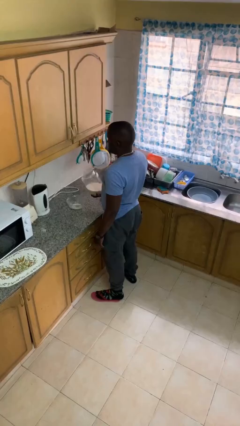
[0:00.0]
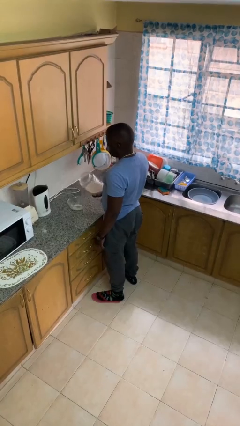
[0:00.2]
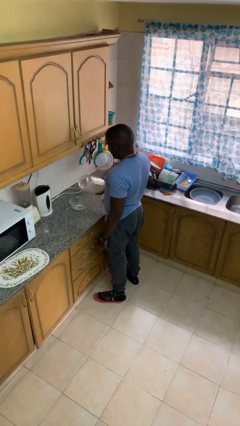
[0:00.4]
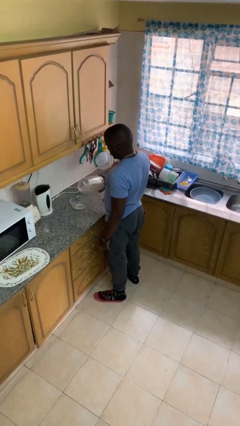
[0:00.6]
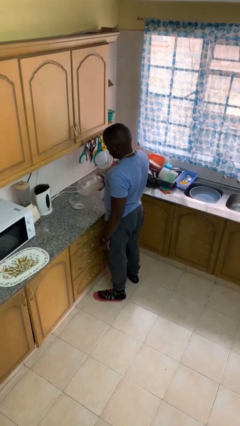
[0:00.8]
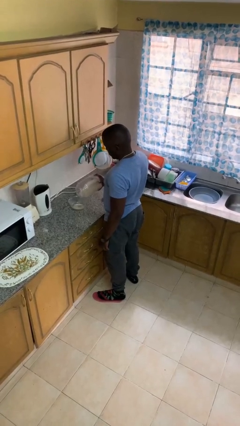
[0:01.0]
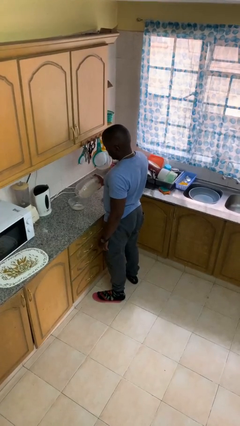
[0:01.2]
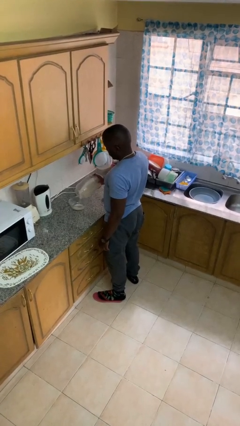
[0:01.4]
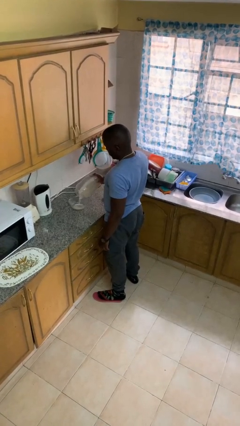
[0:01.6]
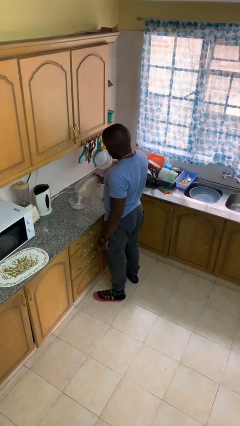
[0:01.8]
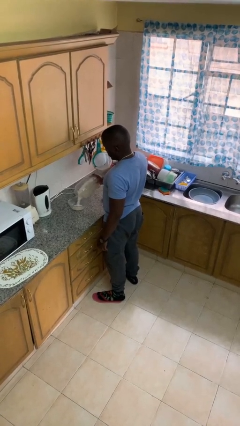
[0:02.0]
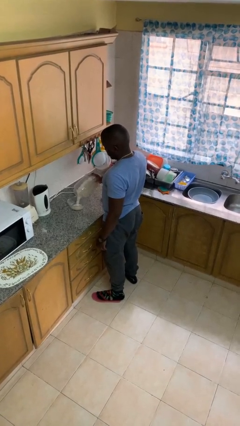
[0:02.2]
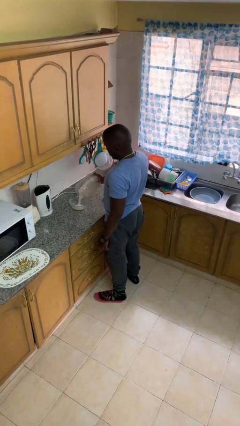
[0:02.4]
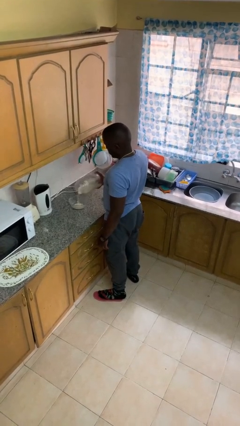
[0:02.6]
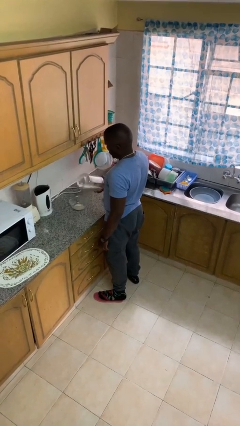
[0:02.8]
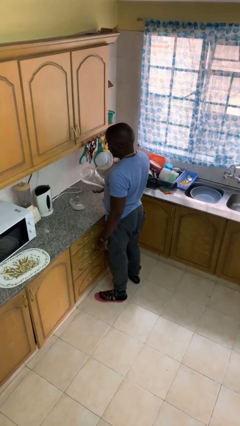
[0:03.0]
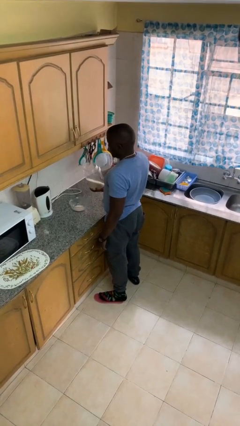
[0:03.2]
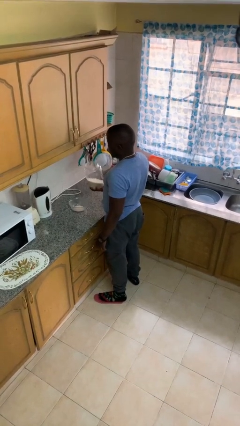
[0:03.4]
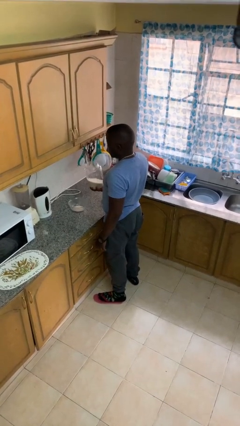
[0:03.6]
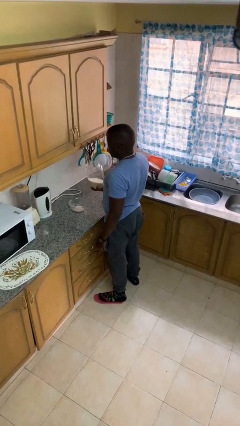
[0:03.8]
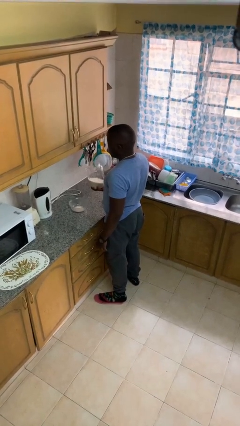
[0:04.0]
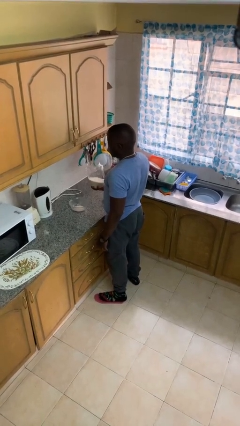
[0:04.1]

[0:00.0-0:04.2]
person pours into bowl

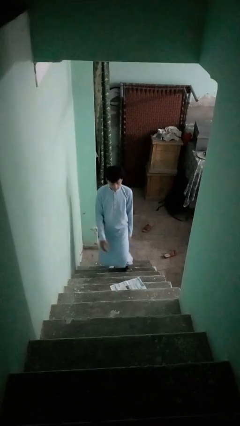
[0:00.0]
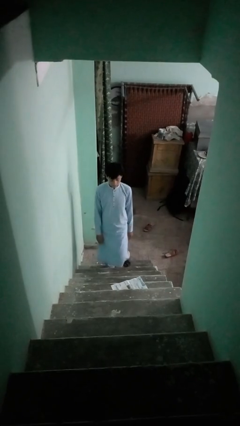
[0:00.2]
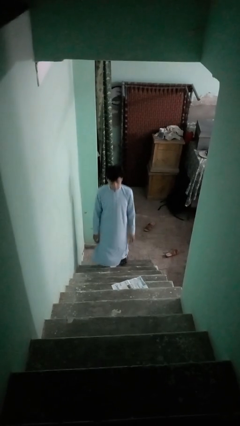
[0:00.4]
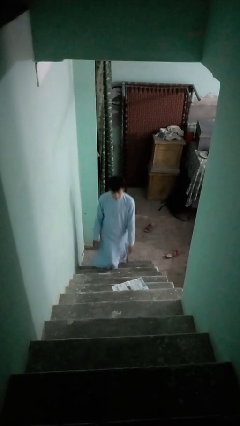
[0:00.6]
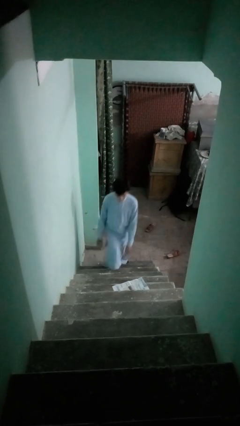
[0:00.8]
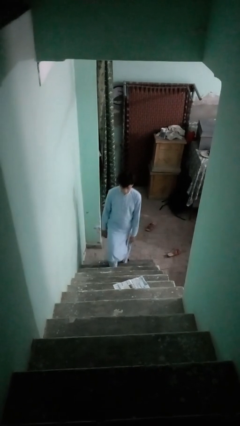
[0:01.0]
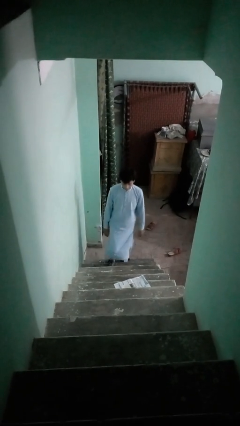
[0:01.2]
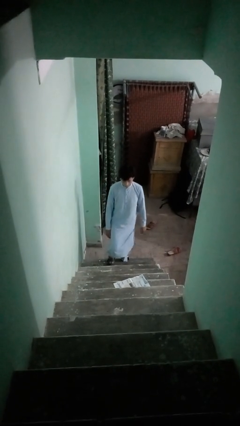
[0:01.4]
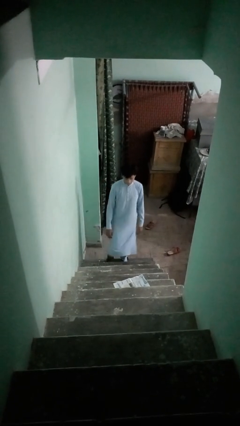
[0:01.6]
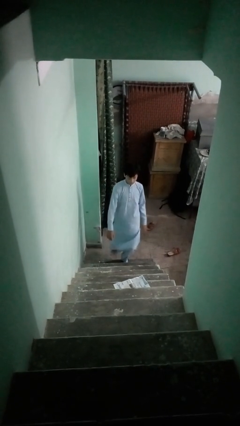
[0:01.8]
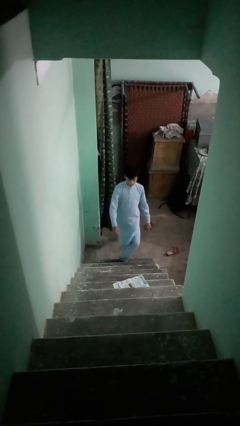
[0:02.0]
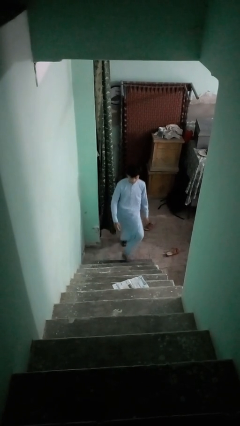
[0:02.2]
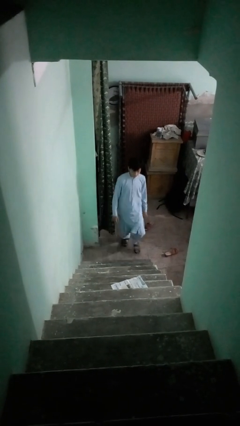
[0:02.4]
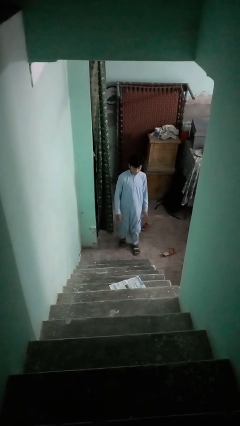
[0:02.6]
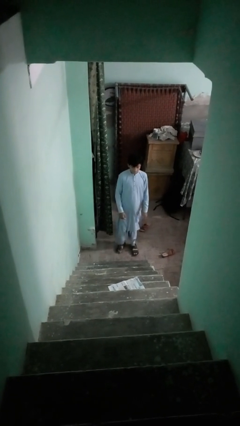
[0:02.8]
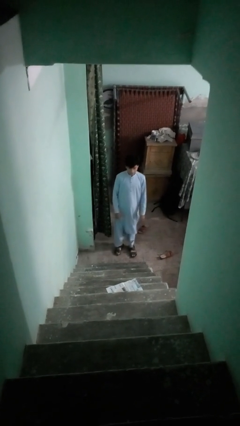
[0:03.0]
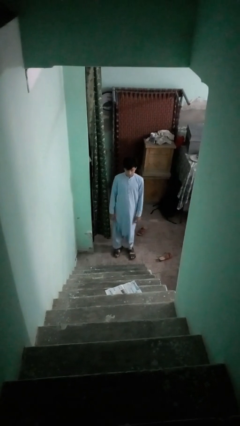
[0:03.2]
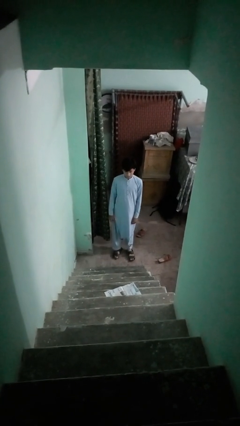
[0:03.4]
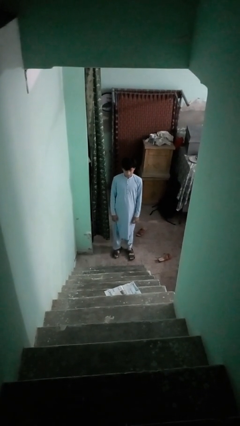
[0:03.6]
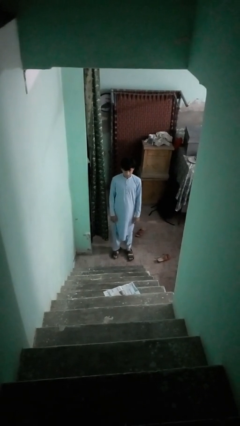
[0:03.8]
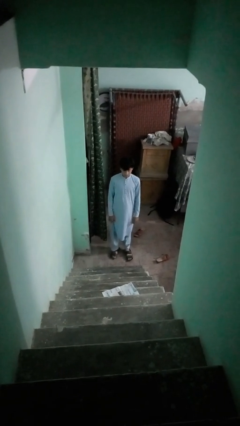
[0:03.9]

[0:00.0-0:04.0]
person climbs down stairs

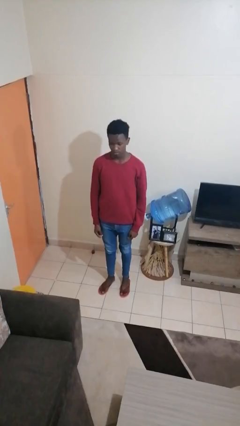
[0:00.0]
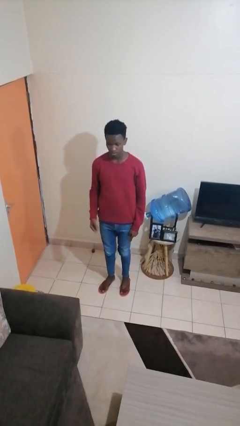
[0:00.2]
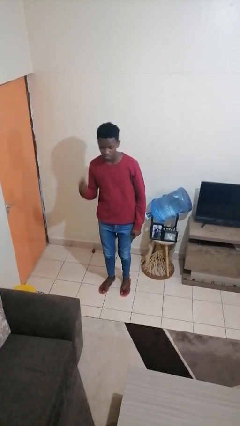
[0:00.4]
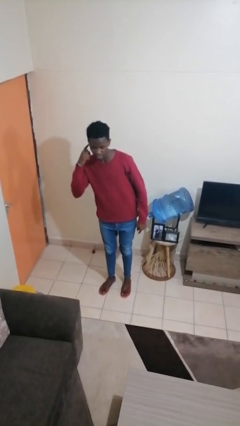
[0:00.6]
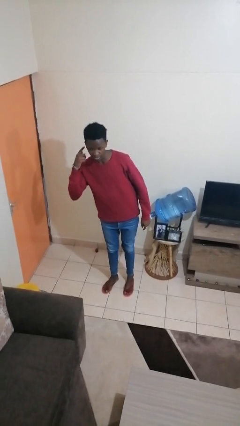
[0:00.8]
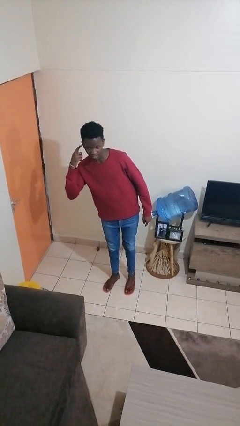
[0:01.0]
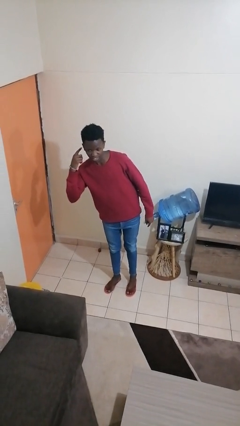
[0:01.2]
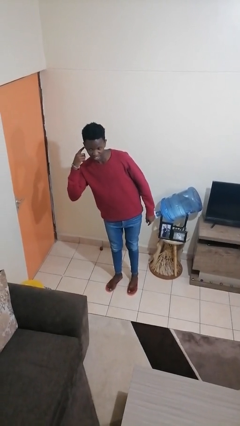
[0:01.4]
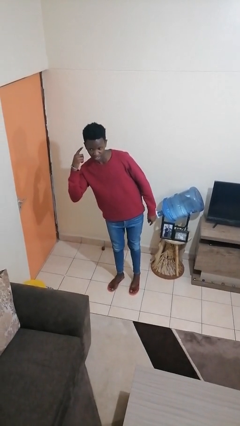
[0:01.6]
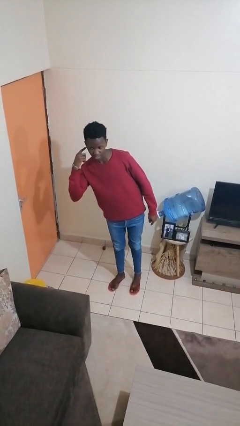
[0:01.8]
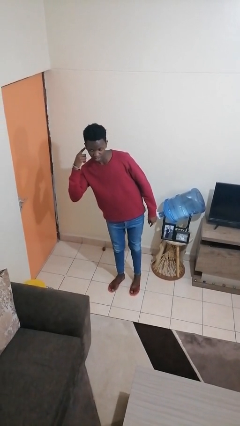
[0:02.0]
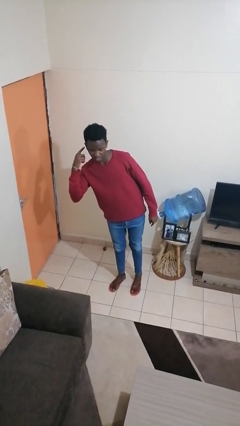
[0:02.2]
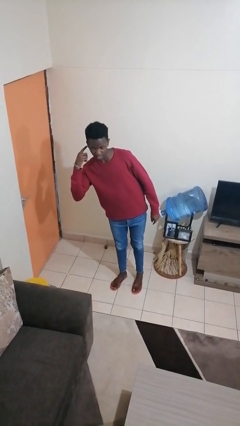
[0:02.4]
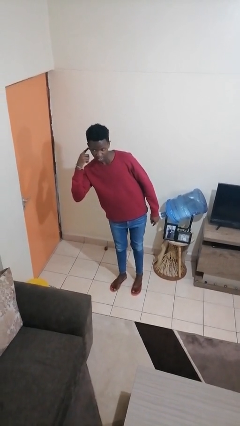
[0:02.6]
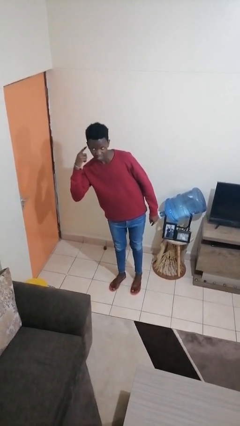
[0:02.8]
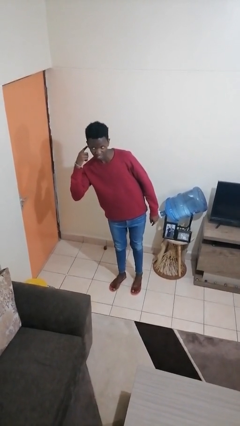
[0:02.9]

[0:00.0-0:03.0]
person gestures listen closely

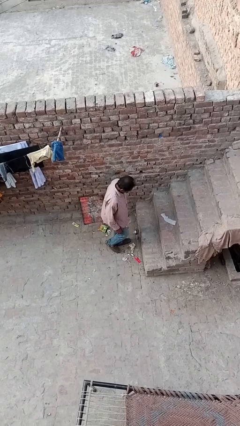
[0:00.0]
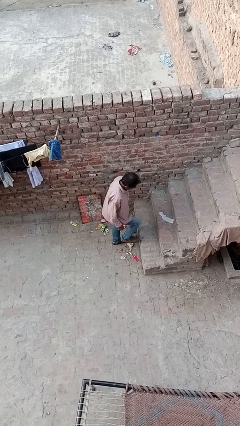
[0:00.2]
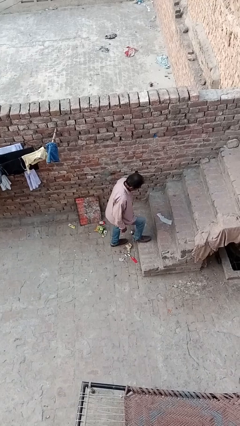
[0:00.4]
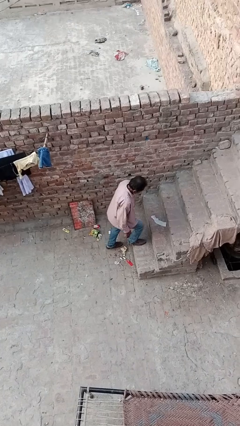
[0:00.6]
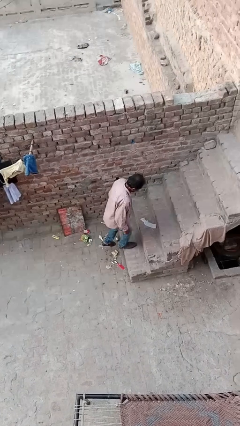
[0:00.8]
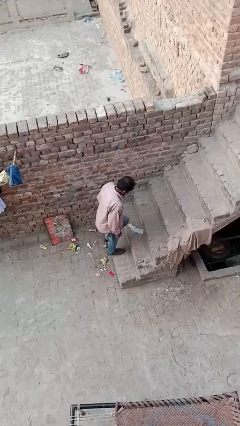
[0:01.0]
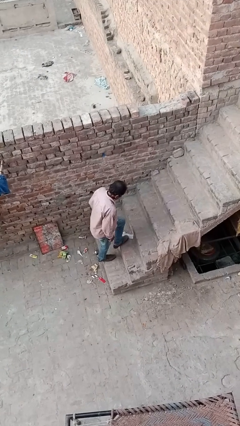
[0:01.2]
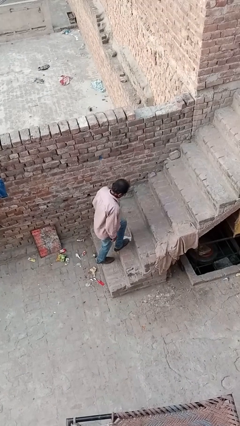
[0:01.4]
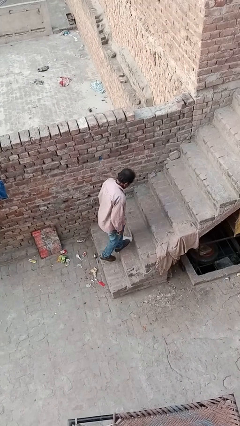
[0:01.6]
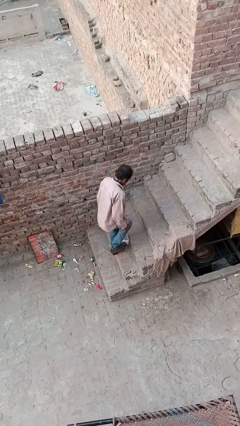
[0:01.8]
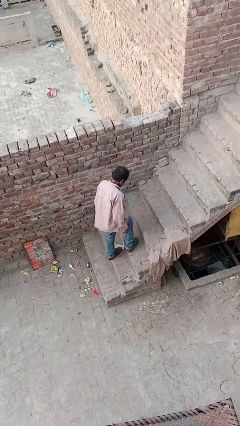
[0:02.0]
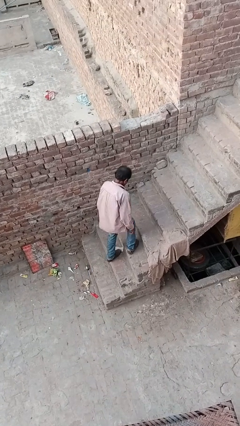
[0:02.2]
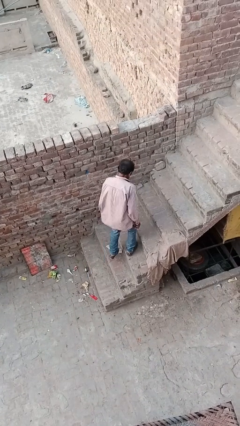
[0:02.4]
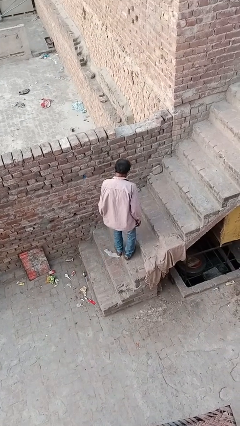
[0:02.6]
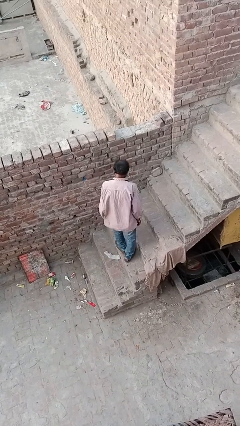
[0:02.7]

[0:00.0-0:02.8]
person climbs up stairs

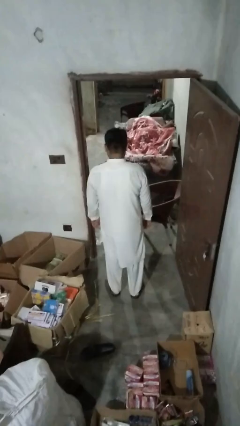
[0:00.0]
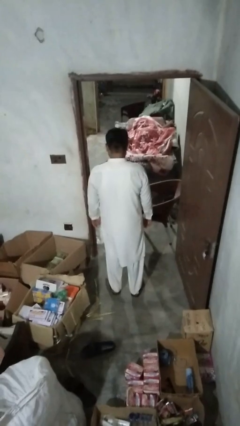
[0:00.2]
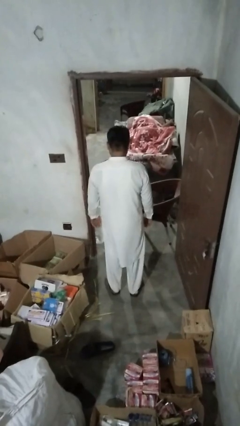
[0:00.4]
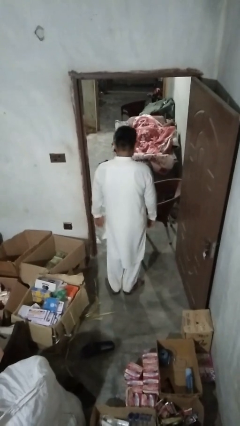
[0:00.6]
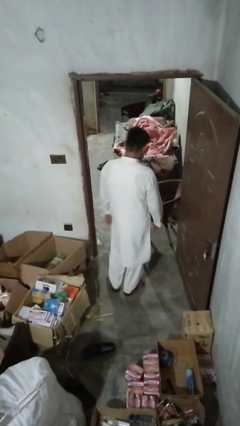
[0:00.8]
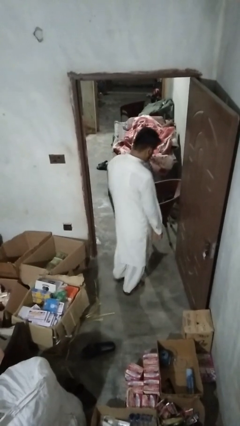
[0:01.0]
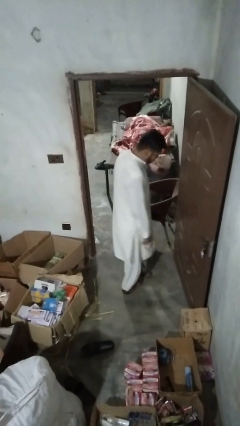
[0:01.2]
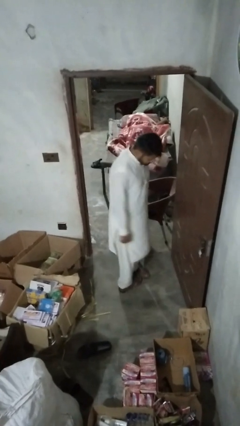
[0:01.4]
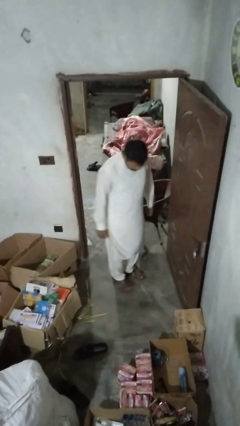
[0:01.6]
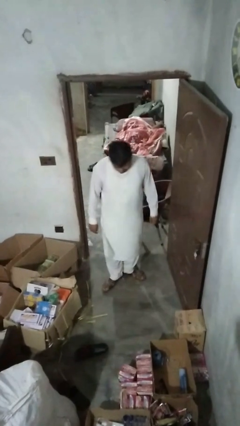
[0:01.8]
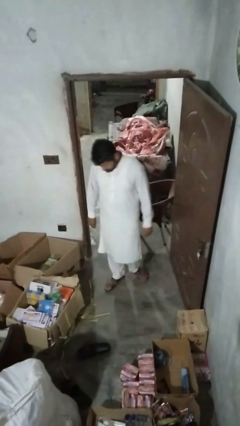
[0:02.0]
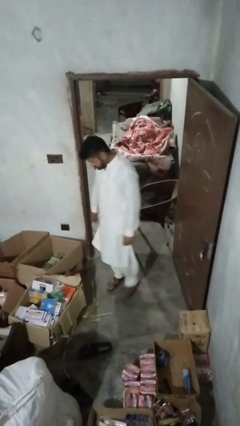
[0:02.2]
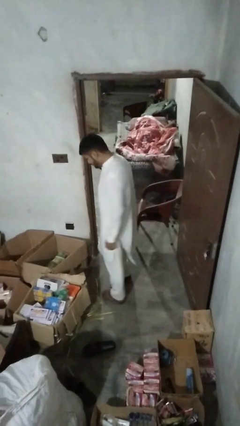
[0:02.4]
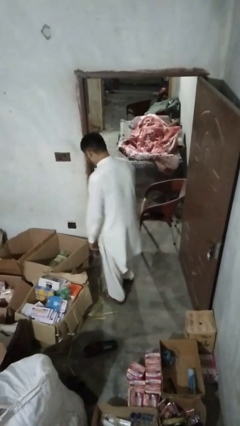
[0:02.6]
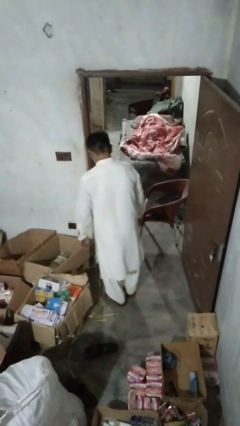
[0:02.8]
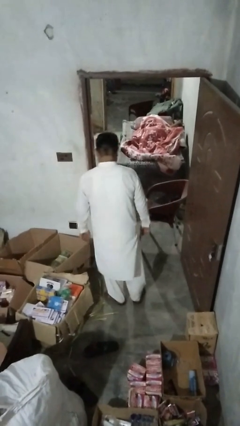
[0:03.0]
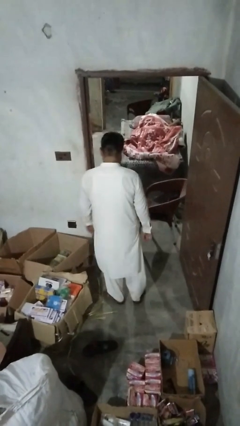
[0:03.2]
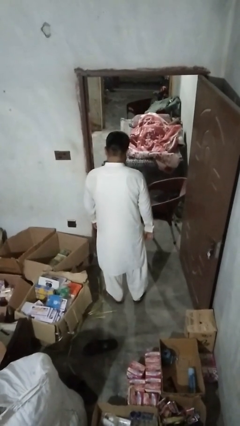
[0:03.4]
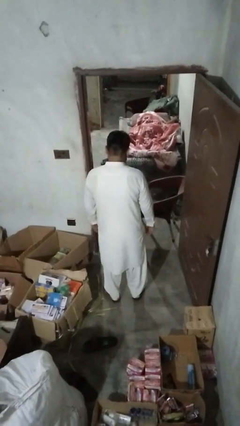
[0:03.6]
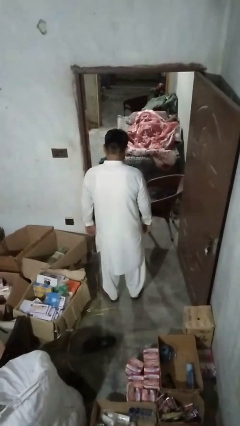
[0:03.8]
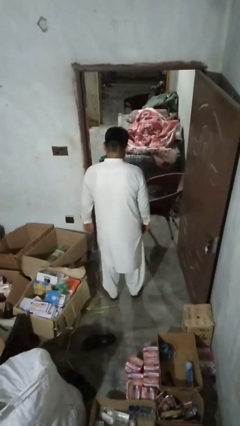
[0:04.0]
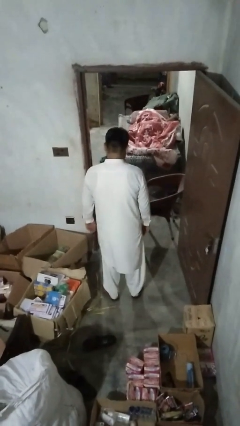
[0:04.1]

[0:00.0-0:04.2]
person twirls
